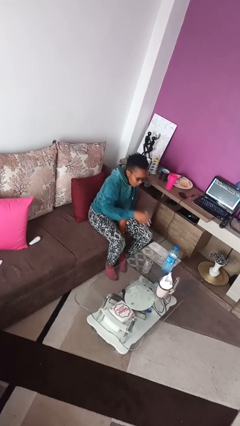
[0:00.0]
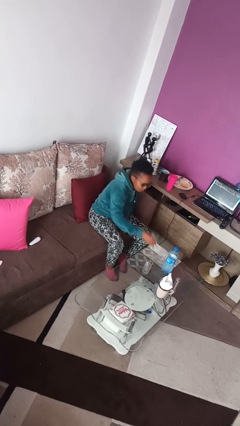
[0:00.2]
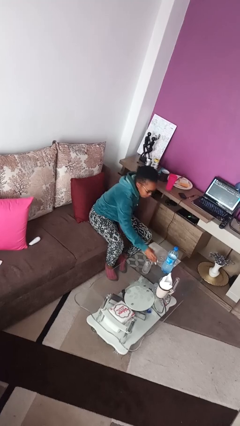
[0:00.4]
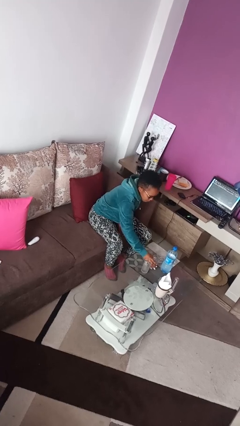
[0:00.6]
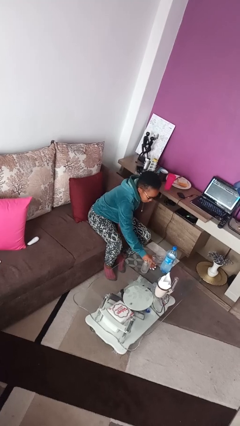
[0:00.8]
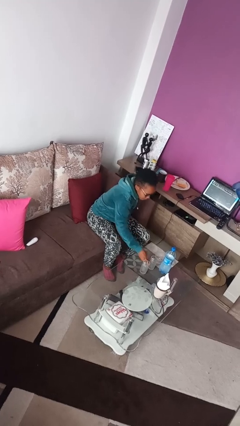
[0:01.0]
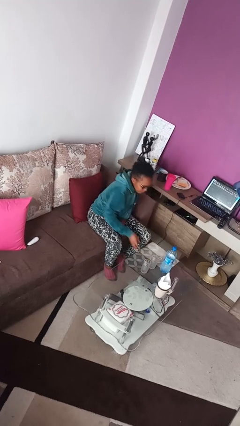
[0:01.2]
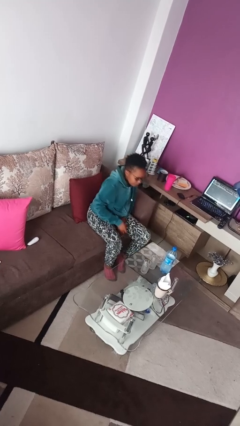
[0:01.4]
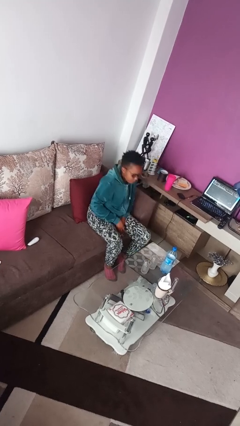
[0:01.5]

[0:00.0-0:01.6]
person puts down object on table

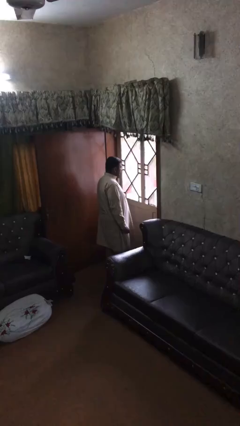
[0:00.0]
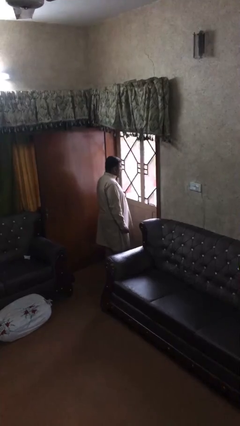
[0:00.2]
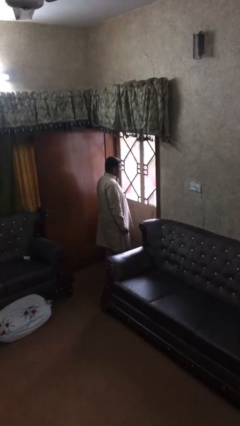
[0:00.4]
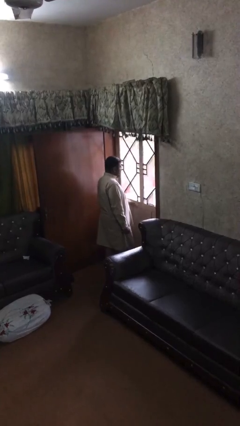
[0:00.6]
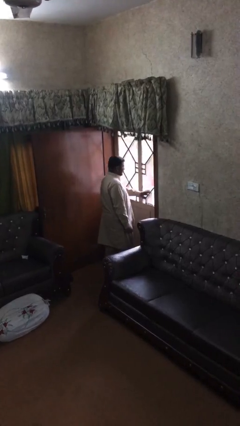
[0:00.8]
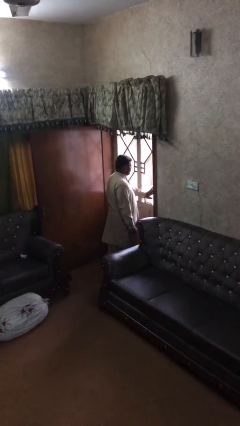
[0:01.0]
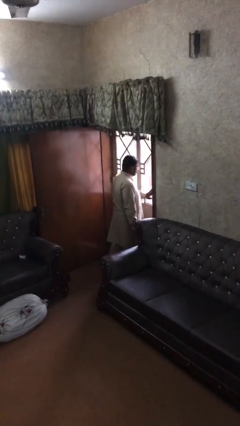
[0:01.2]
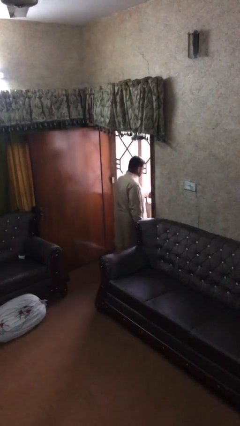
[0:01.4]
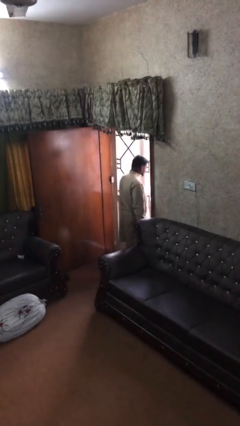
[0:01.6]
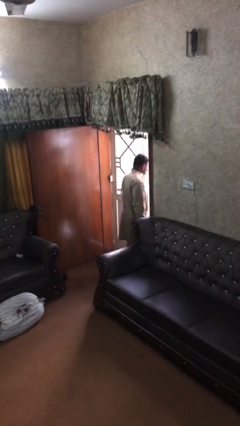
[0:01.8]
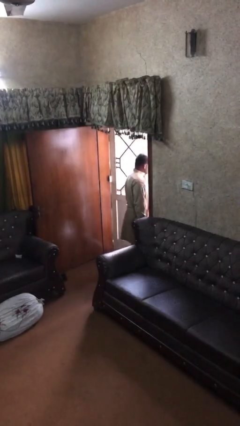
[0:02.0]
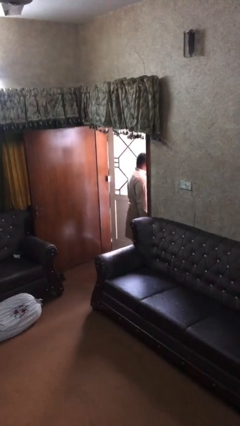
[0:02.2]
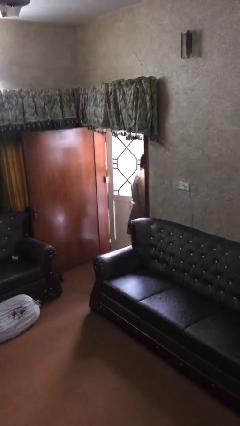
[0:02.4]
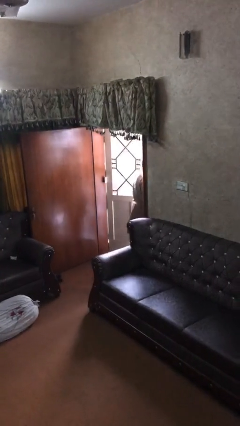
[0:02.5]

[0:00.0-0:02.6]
person opens facility door

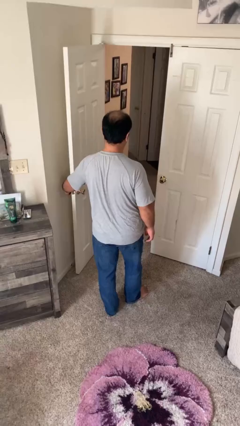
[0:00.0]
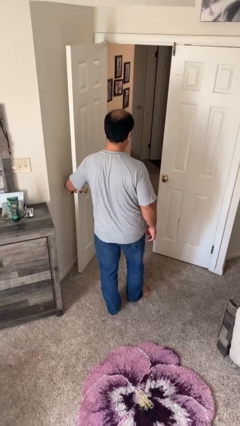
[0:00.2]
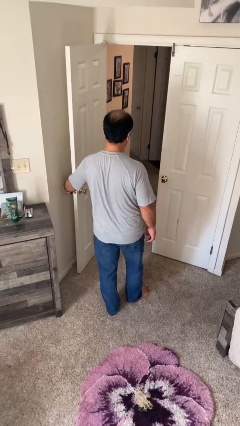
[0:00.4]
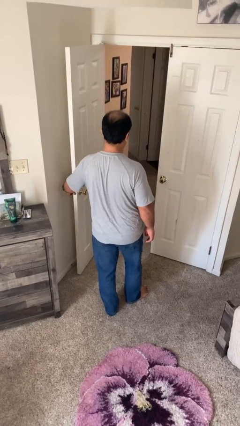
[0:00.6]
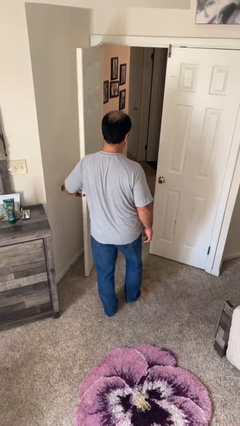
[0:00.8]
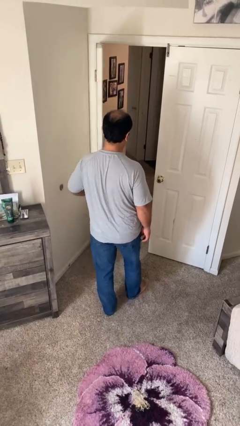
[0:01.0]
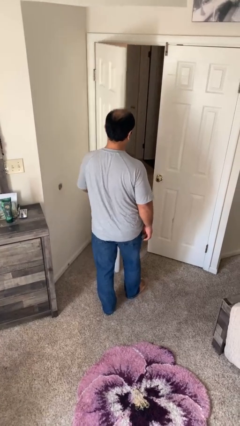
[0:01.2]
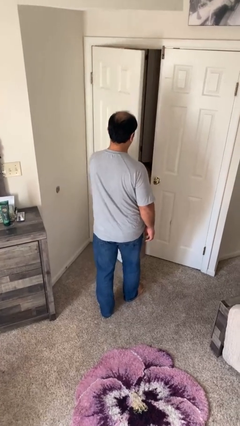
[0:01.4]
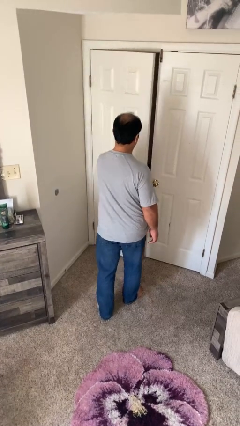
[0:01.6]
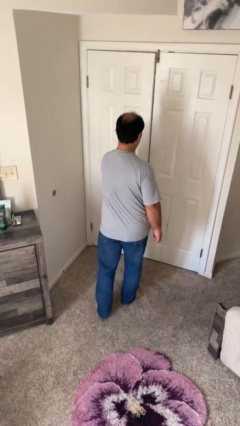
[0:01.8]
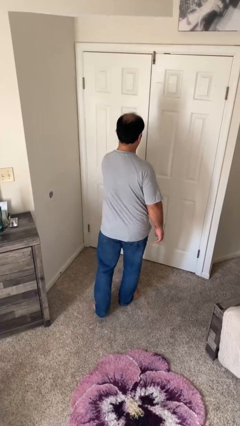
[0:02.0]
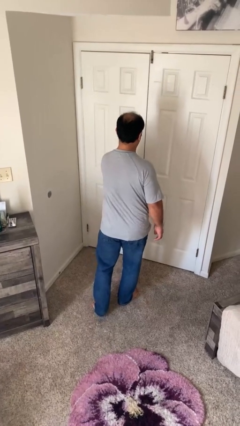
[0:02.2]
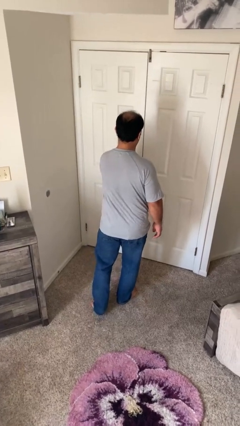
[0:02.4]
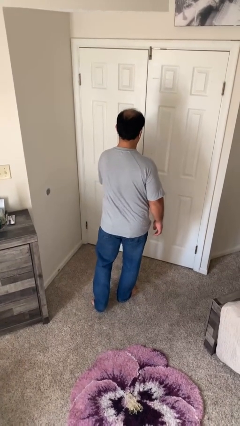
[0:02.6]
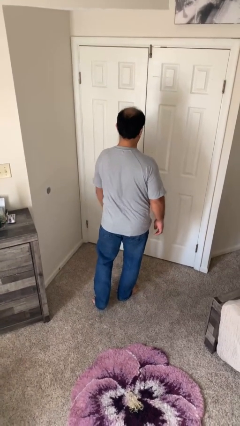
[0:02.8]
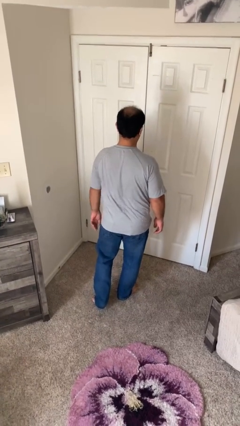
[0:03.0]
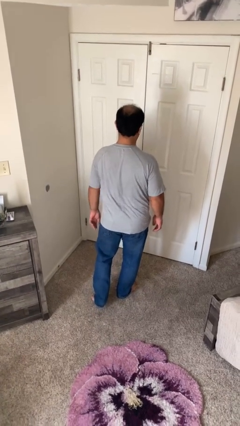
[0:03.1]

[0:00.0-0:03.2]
person closes facility door

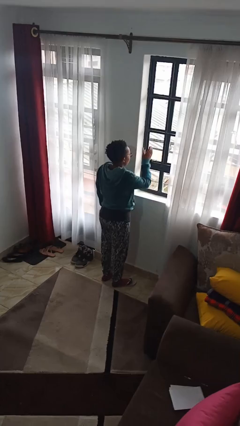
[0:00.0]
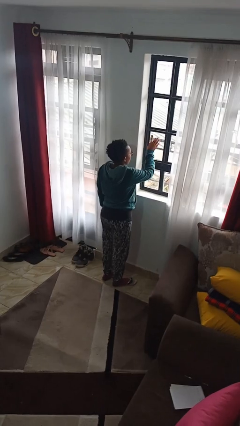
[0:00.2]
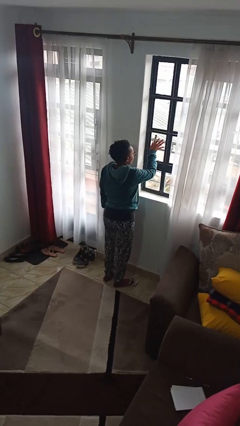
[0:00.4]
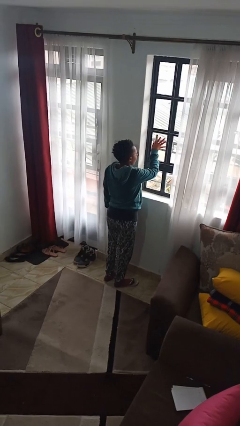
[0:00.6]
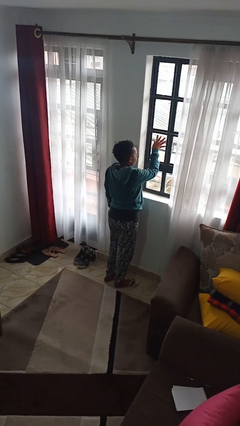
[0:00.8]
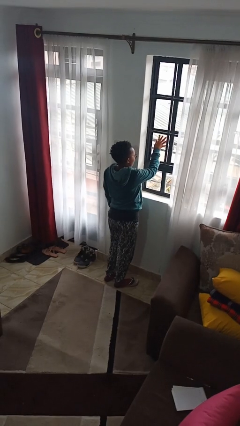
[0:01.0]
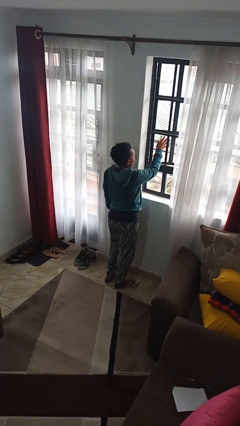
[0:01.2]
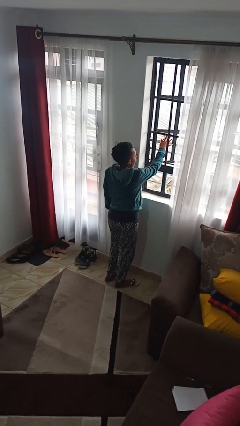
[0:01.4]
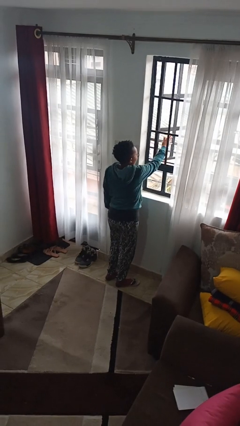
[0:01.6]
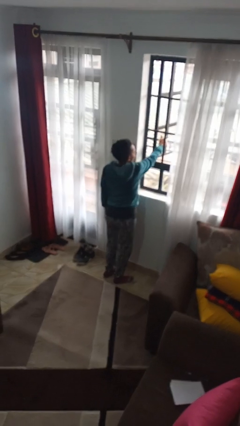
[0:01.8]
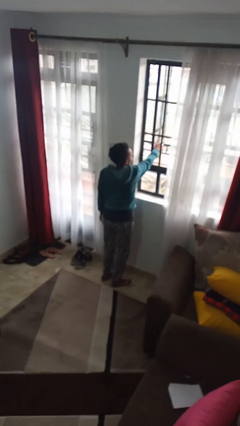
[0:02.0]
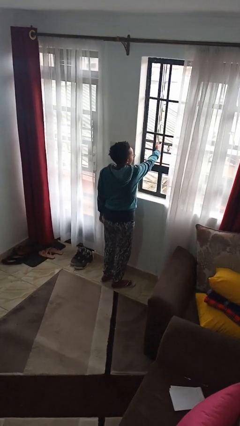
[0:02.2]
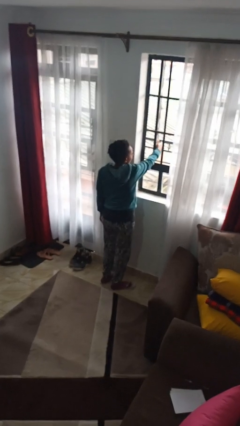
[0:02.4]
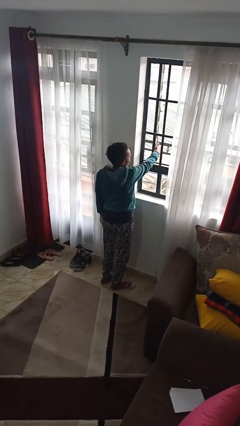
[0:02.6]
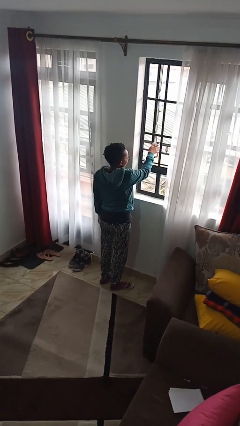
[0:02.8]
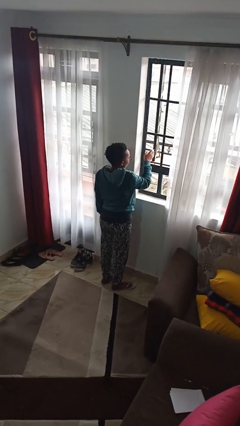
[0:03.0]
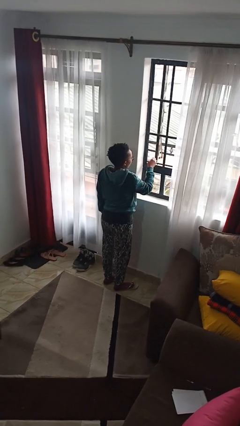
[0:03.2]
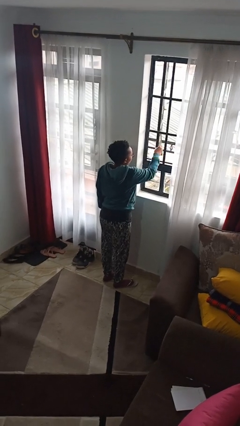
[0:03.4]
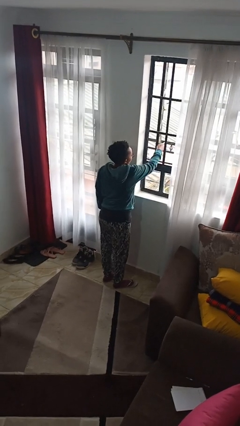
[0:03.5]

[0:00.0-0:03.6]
person opens home window

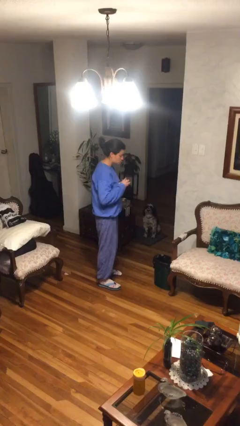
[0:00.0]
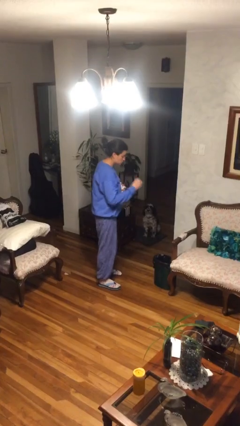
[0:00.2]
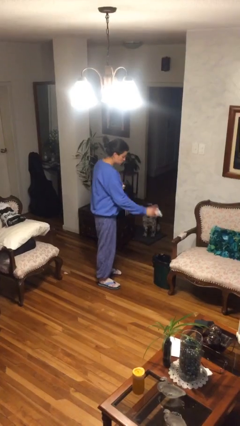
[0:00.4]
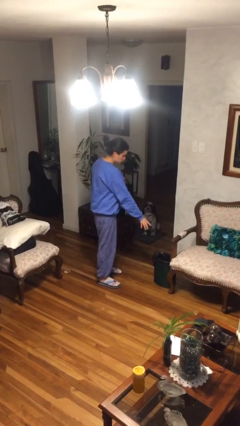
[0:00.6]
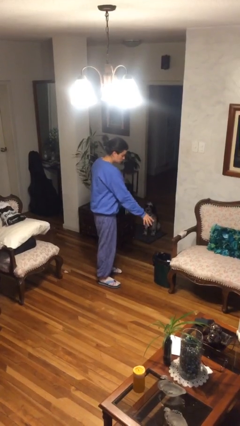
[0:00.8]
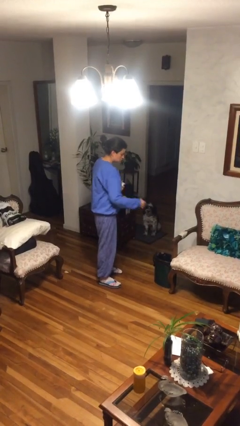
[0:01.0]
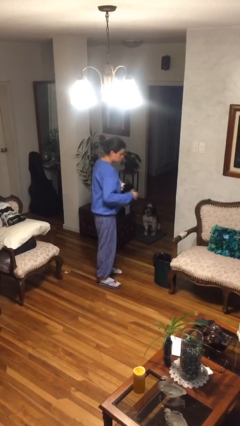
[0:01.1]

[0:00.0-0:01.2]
person discards trash

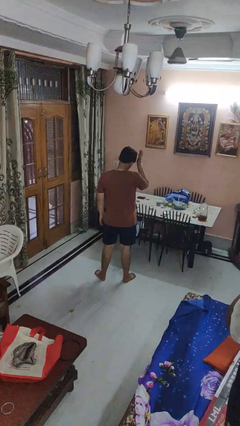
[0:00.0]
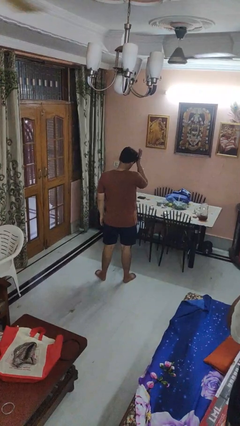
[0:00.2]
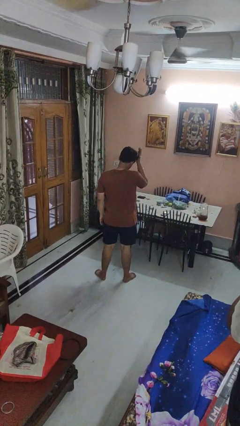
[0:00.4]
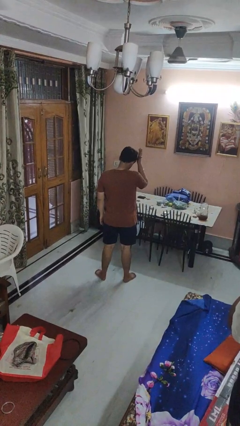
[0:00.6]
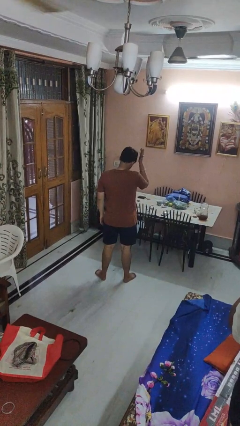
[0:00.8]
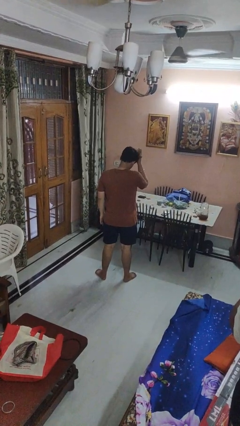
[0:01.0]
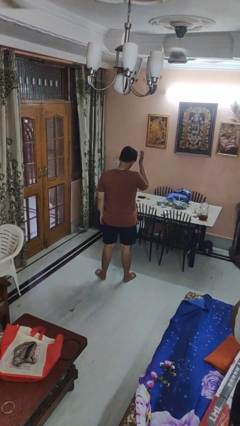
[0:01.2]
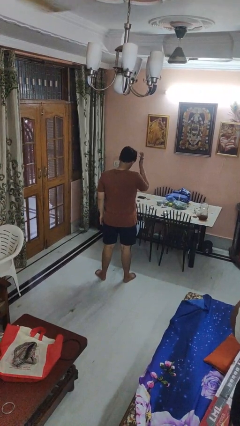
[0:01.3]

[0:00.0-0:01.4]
person pats head

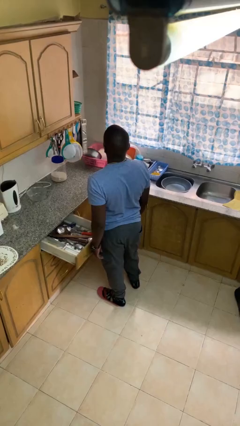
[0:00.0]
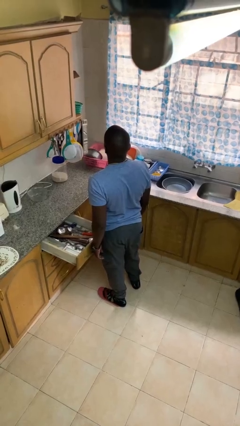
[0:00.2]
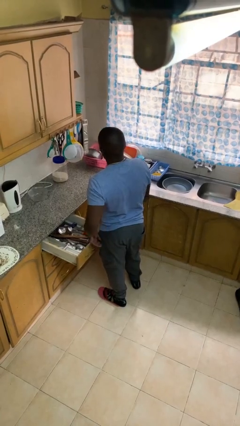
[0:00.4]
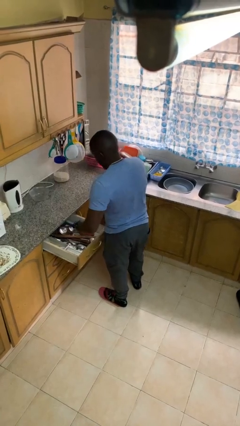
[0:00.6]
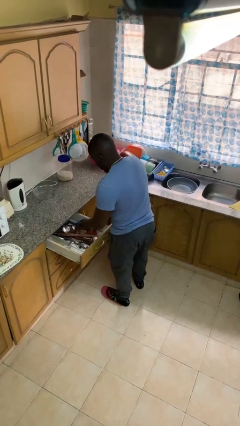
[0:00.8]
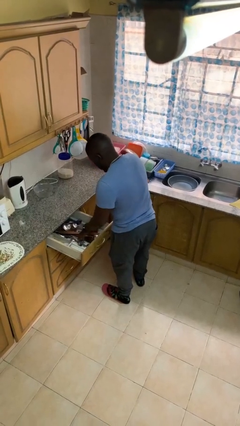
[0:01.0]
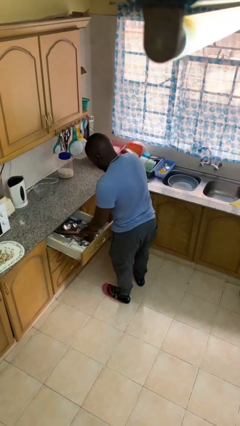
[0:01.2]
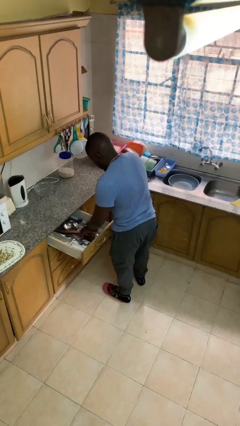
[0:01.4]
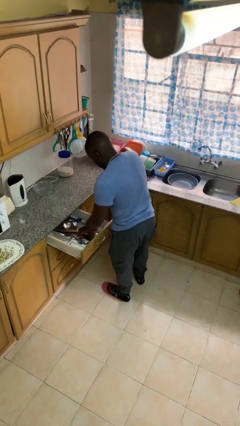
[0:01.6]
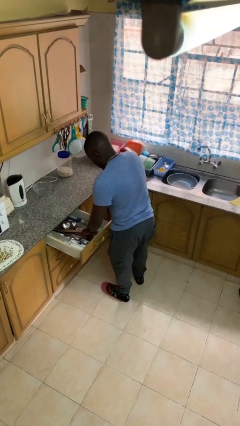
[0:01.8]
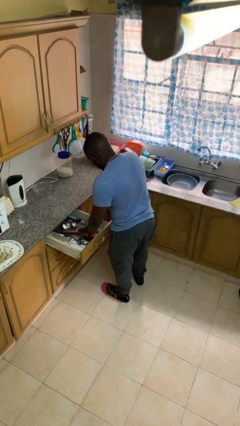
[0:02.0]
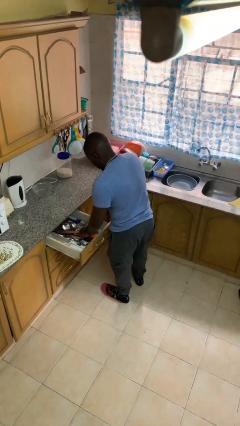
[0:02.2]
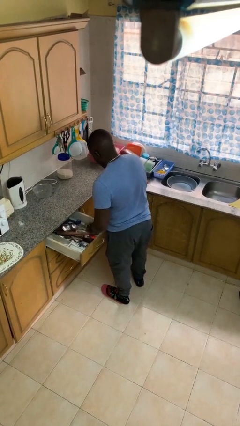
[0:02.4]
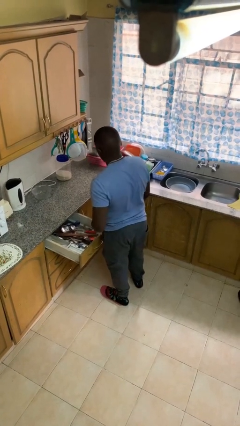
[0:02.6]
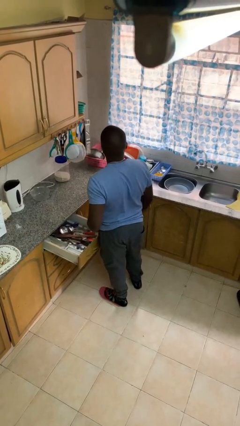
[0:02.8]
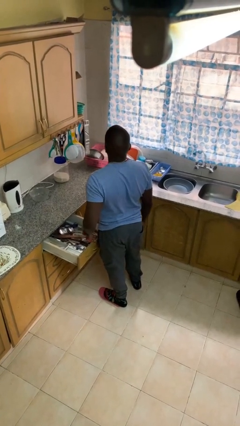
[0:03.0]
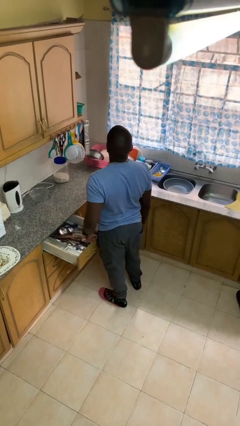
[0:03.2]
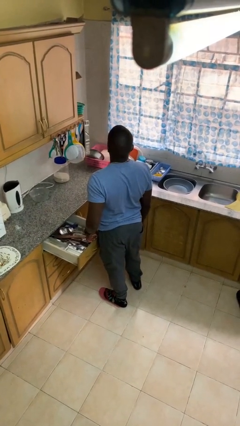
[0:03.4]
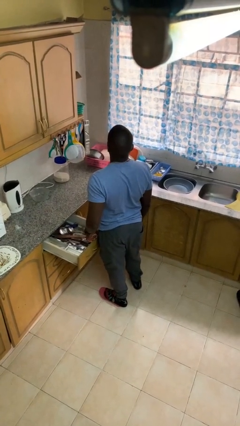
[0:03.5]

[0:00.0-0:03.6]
person searches in kitchen drawer
